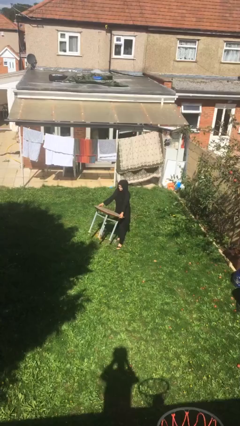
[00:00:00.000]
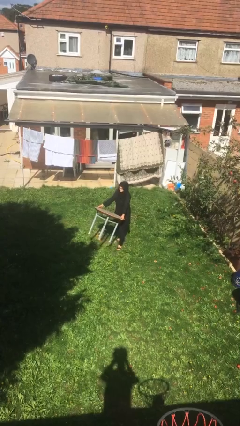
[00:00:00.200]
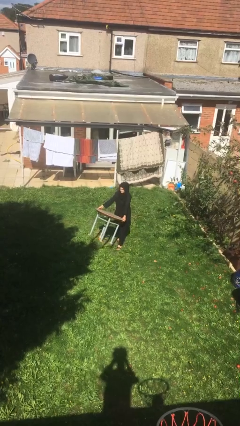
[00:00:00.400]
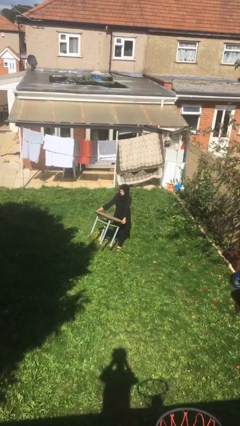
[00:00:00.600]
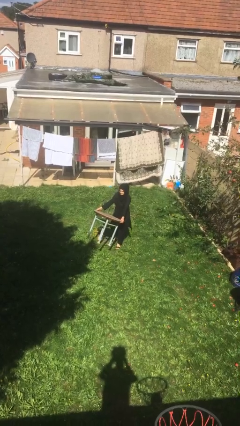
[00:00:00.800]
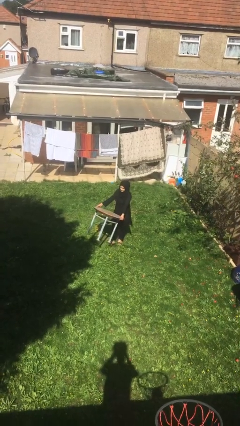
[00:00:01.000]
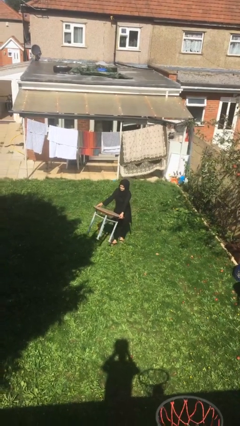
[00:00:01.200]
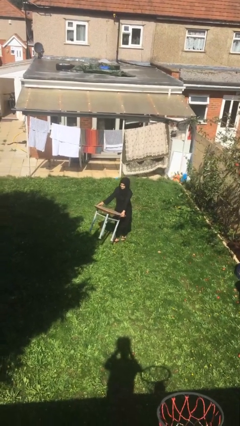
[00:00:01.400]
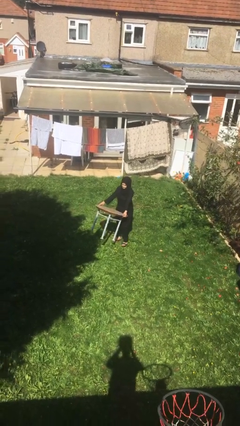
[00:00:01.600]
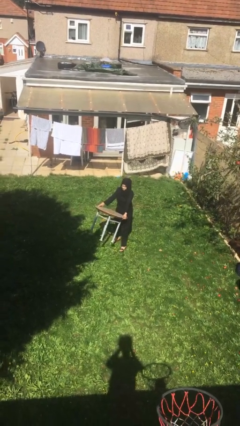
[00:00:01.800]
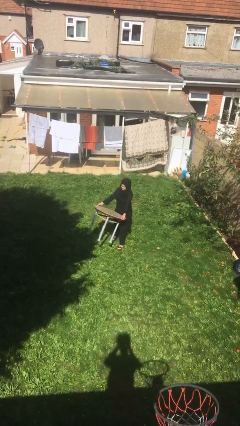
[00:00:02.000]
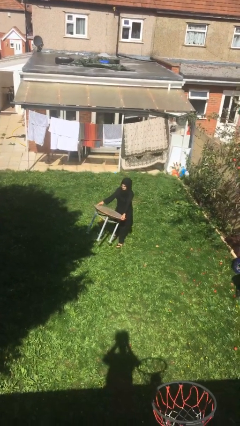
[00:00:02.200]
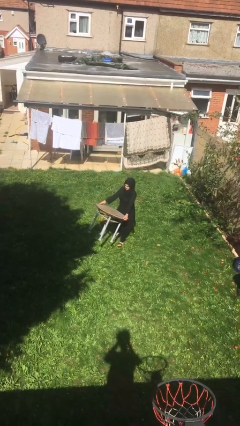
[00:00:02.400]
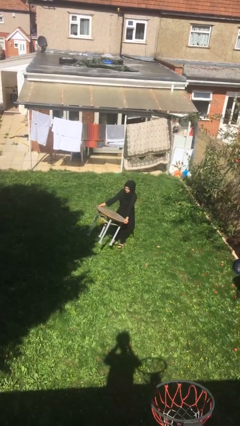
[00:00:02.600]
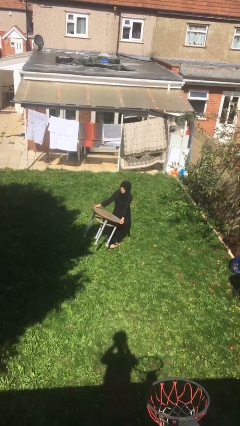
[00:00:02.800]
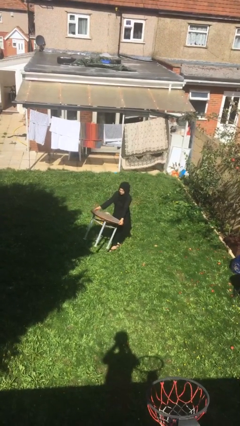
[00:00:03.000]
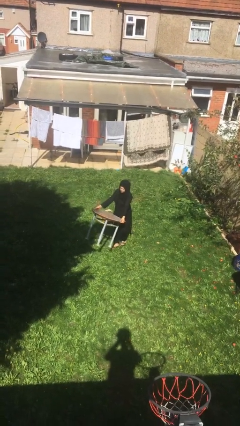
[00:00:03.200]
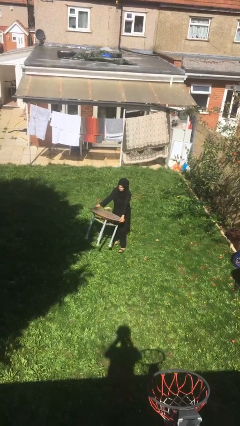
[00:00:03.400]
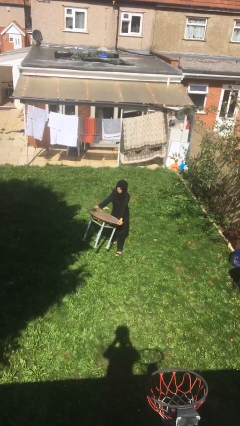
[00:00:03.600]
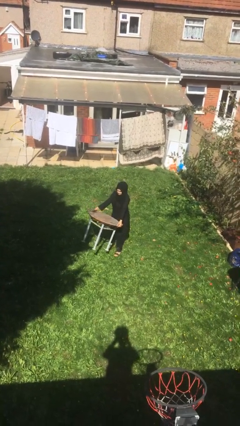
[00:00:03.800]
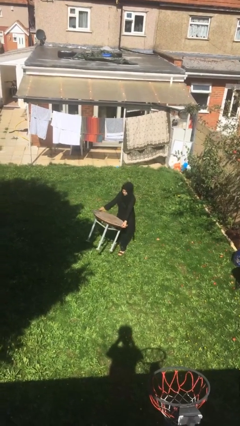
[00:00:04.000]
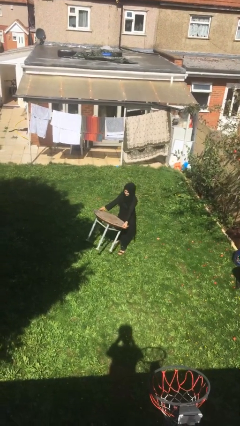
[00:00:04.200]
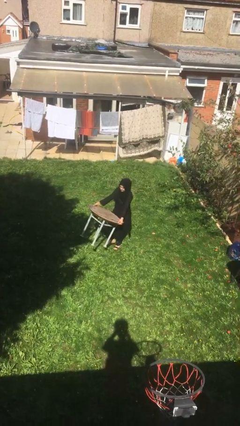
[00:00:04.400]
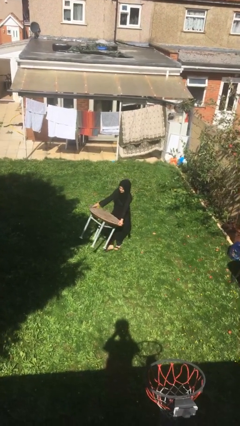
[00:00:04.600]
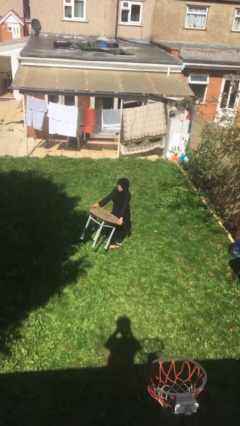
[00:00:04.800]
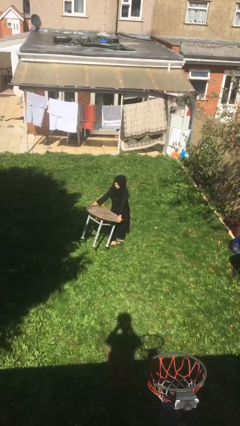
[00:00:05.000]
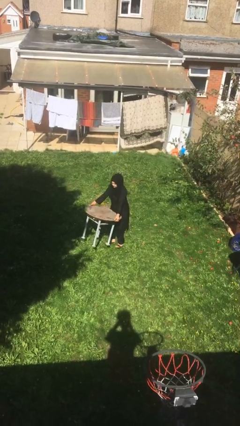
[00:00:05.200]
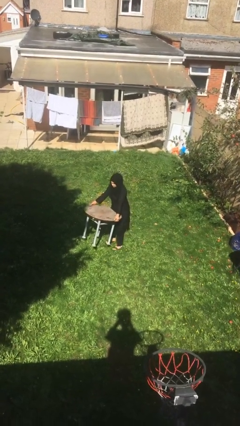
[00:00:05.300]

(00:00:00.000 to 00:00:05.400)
person carries heavy object

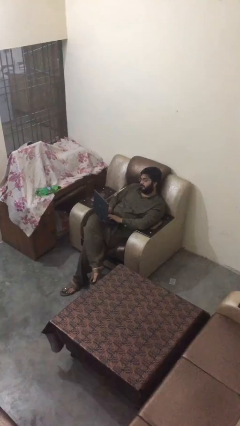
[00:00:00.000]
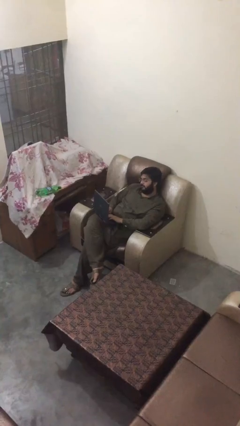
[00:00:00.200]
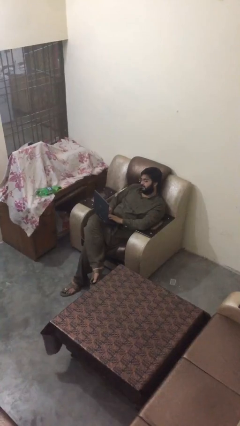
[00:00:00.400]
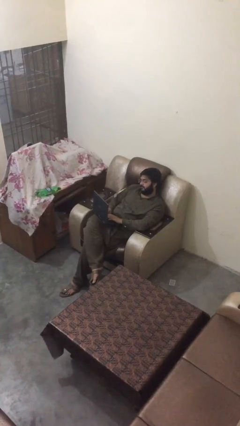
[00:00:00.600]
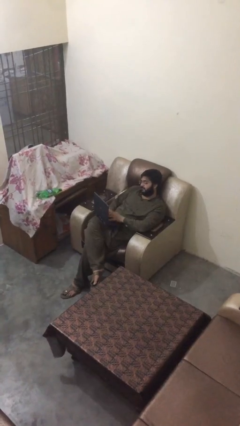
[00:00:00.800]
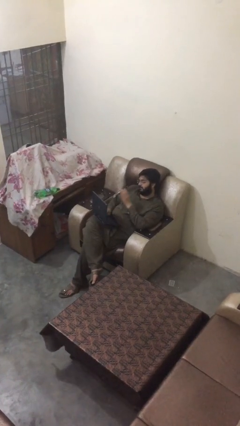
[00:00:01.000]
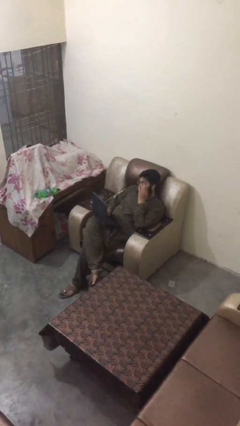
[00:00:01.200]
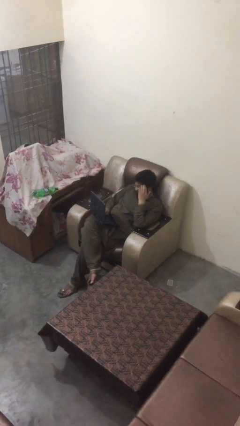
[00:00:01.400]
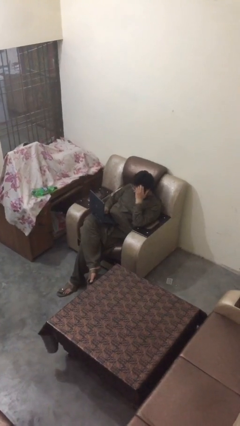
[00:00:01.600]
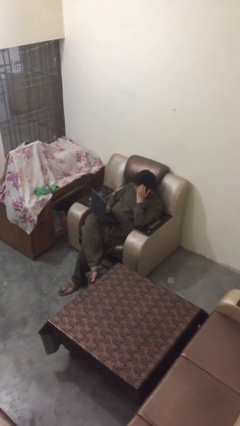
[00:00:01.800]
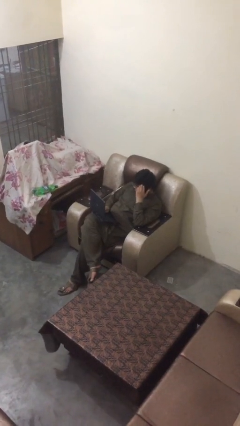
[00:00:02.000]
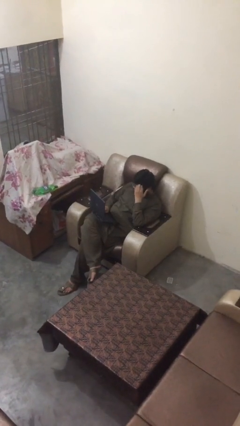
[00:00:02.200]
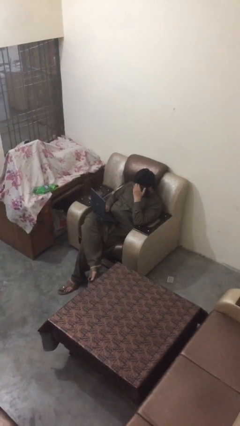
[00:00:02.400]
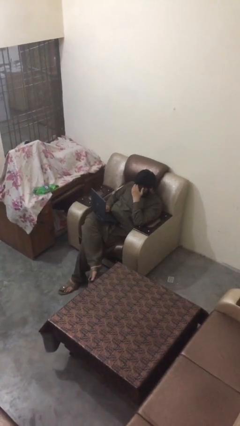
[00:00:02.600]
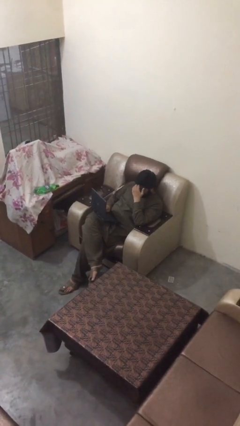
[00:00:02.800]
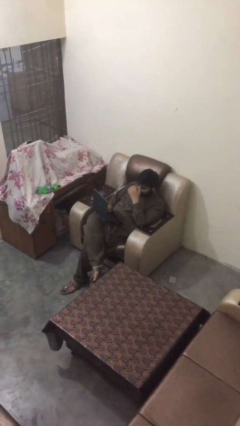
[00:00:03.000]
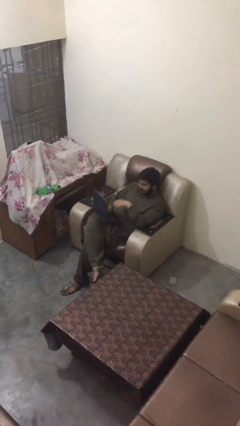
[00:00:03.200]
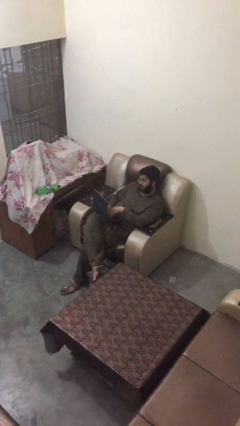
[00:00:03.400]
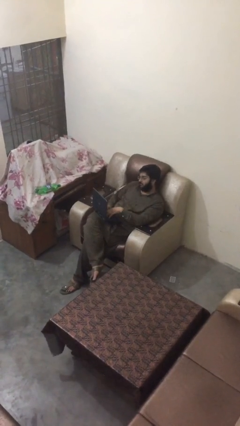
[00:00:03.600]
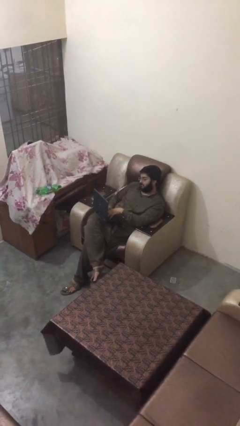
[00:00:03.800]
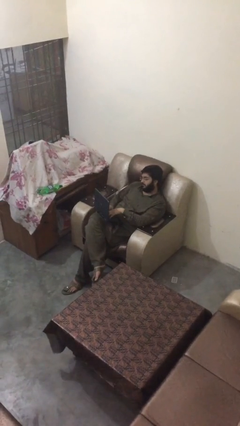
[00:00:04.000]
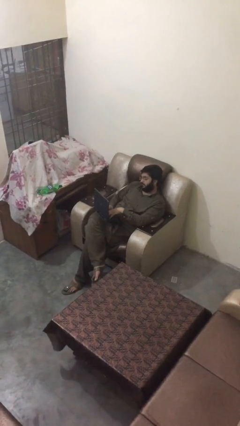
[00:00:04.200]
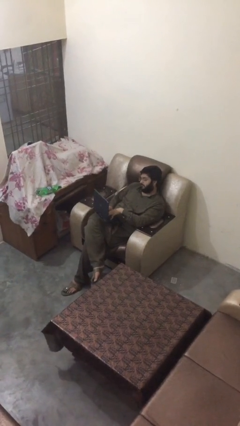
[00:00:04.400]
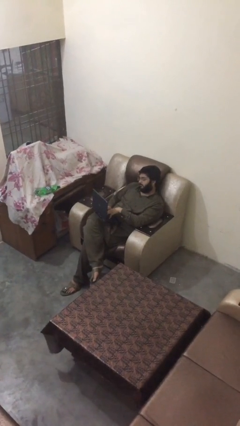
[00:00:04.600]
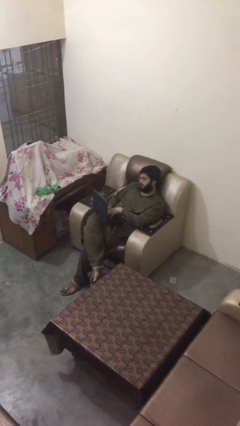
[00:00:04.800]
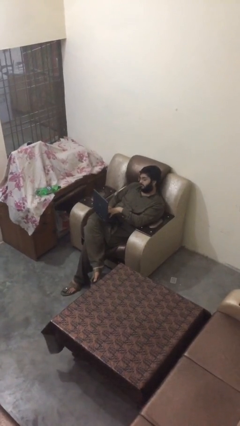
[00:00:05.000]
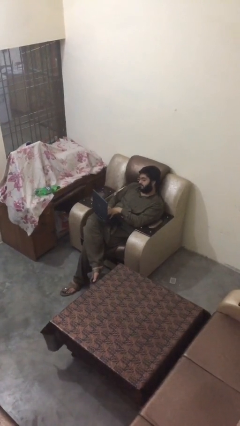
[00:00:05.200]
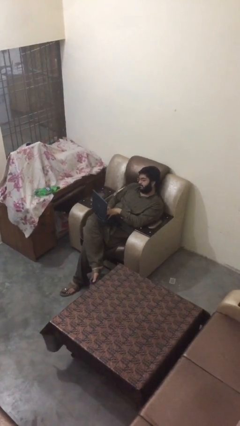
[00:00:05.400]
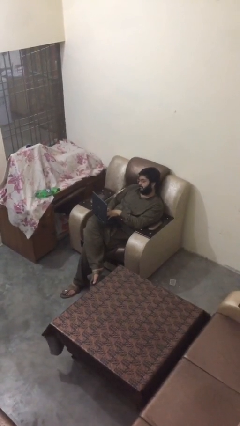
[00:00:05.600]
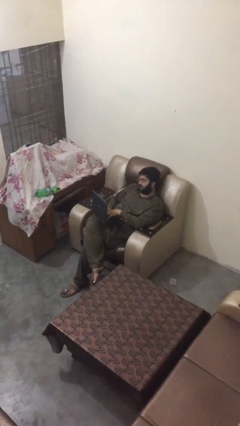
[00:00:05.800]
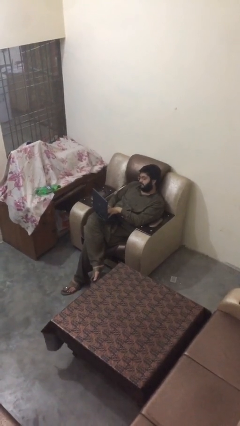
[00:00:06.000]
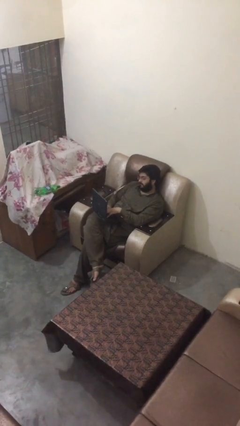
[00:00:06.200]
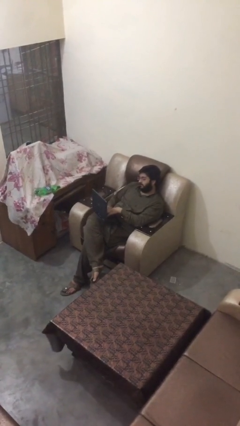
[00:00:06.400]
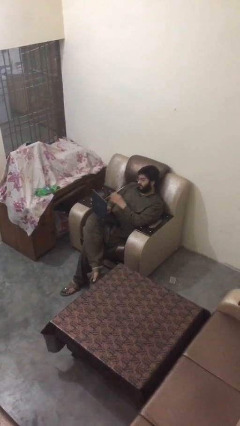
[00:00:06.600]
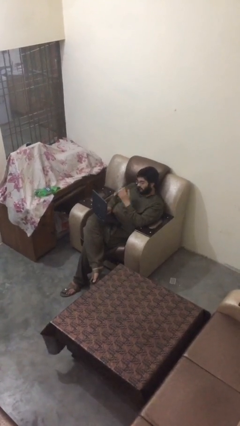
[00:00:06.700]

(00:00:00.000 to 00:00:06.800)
person interacts with laptop

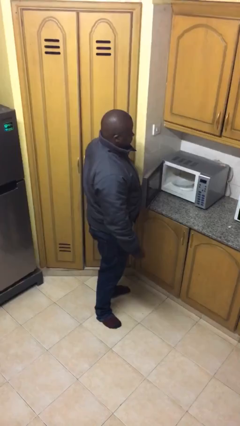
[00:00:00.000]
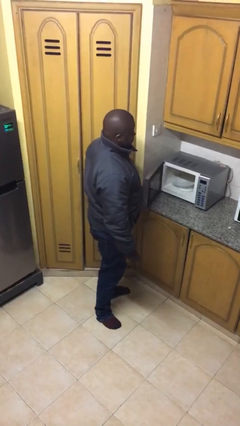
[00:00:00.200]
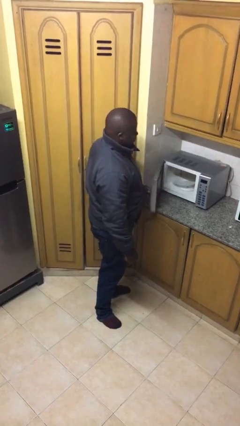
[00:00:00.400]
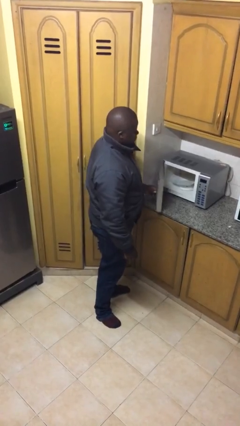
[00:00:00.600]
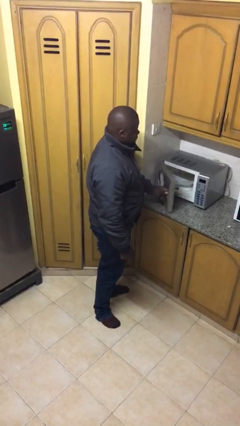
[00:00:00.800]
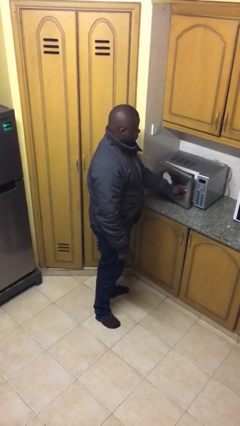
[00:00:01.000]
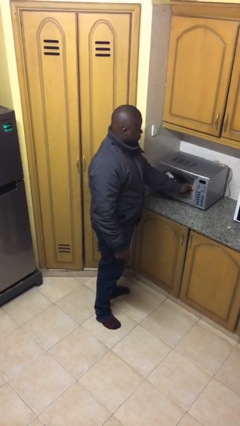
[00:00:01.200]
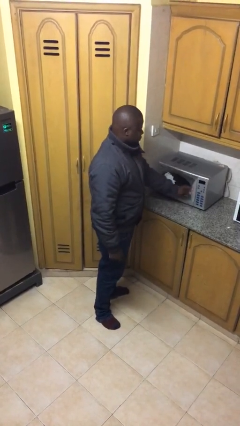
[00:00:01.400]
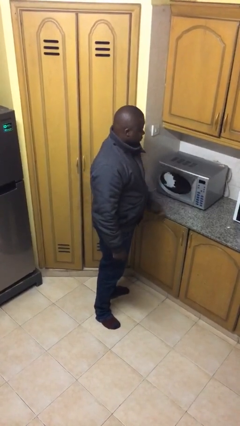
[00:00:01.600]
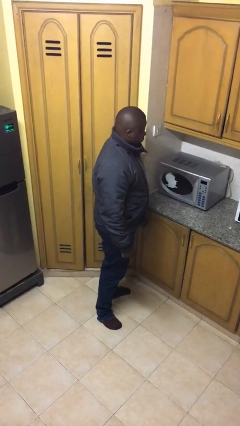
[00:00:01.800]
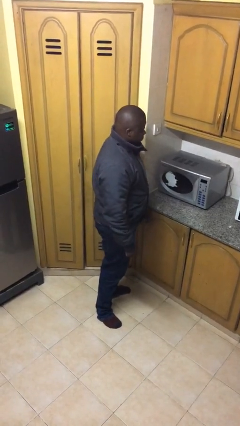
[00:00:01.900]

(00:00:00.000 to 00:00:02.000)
person closes microwave

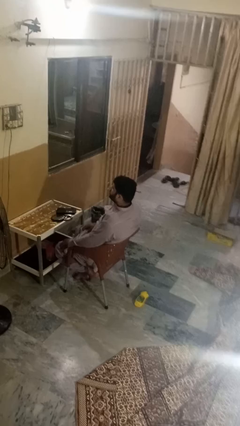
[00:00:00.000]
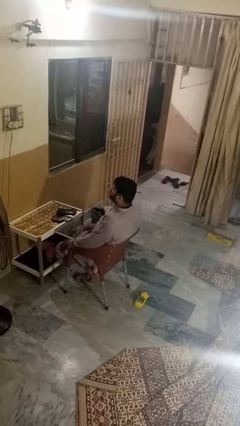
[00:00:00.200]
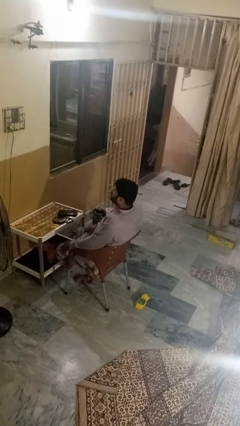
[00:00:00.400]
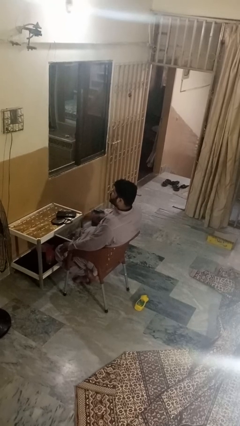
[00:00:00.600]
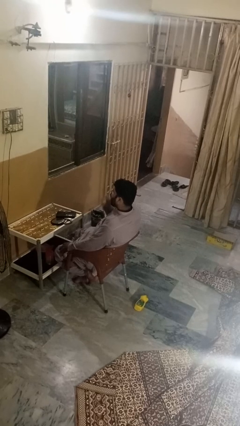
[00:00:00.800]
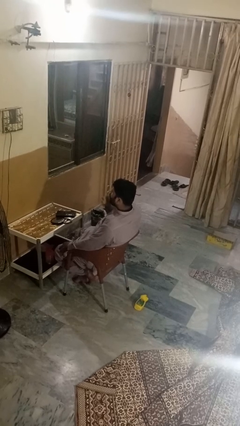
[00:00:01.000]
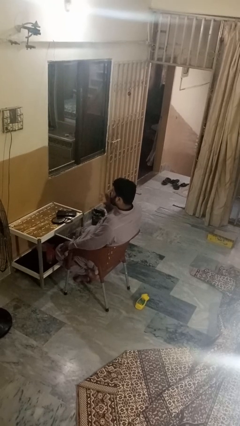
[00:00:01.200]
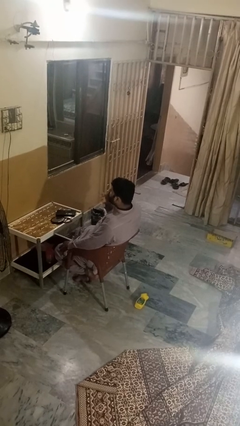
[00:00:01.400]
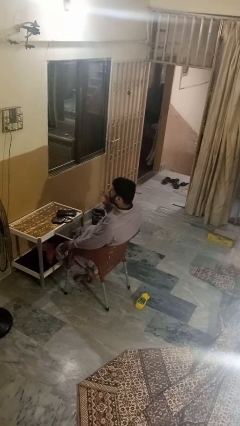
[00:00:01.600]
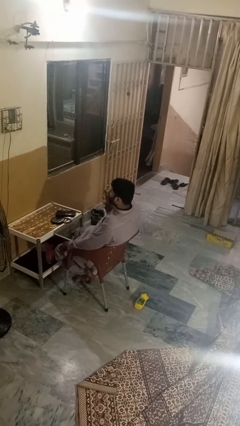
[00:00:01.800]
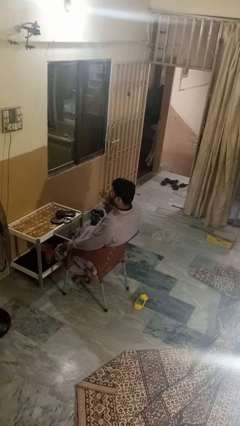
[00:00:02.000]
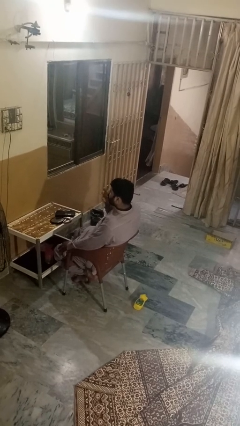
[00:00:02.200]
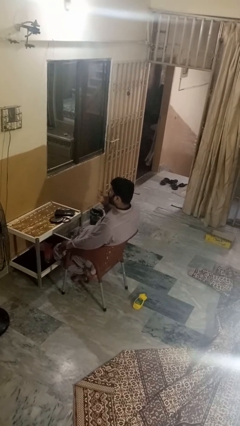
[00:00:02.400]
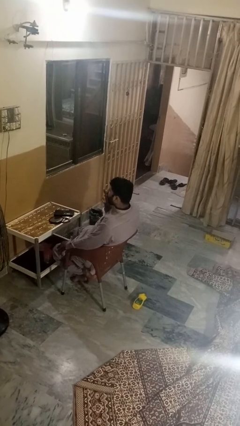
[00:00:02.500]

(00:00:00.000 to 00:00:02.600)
person licks fingers

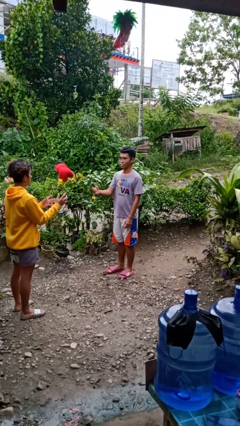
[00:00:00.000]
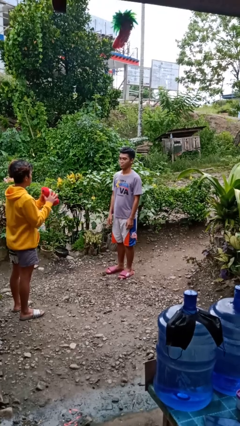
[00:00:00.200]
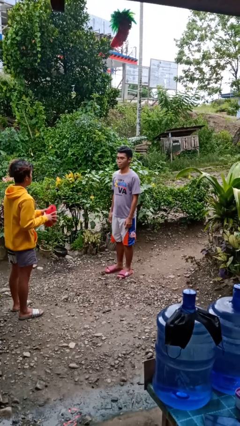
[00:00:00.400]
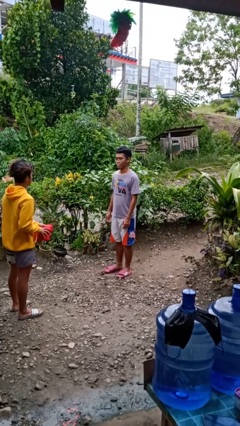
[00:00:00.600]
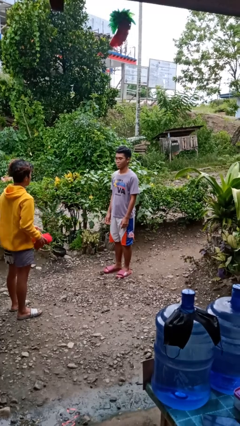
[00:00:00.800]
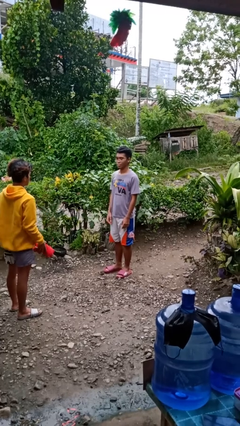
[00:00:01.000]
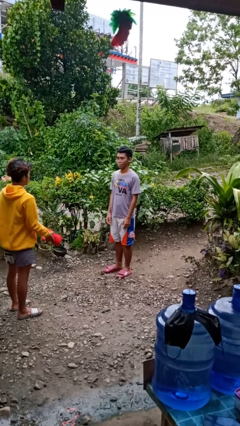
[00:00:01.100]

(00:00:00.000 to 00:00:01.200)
person throws object to person
